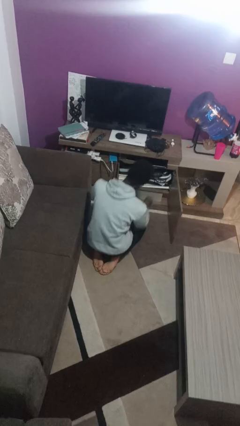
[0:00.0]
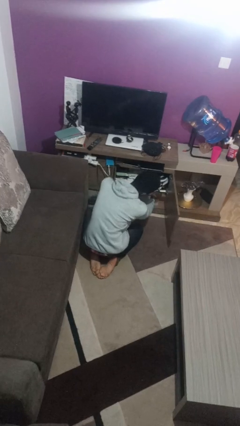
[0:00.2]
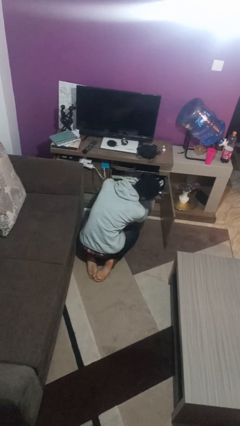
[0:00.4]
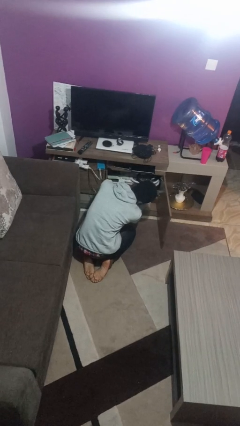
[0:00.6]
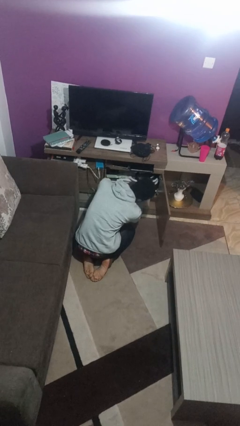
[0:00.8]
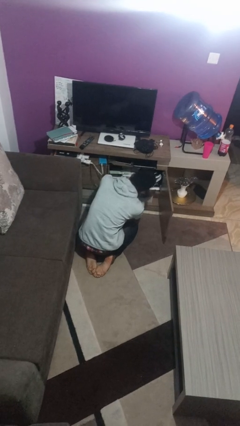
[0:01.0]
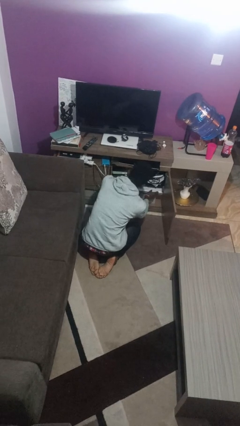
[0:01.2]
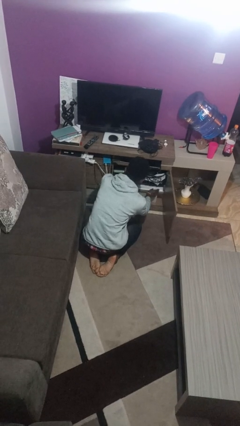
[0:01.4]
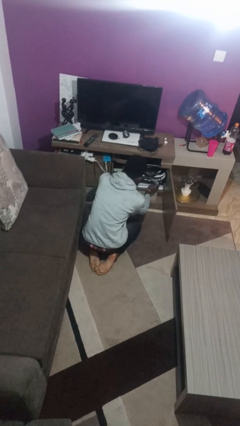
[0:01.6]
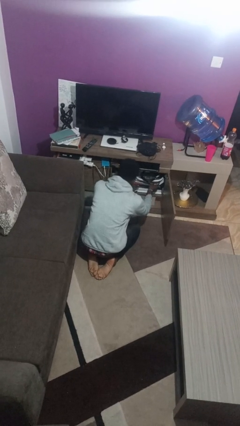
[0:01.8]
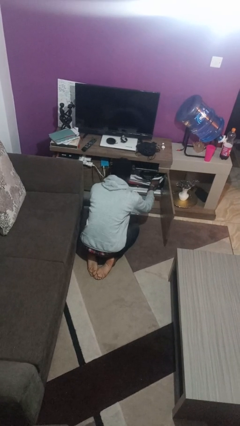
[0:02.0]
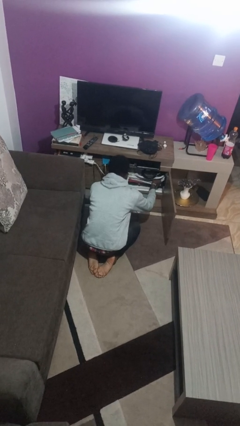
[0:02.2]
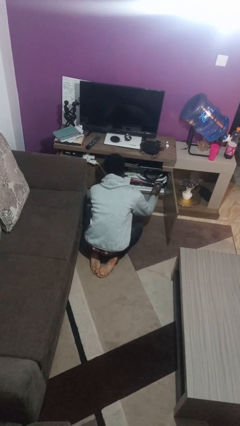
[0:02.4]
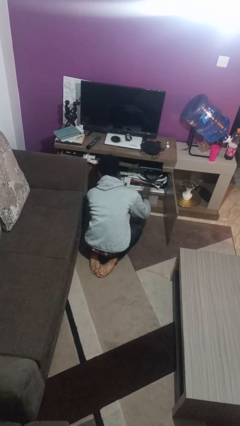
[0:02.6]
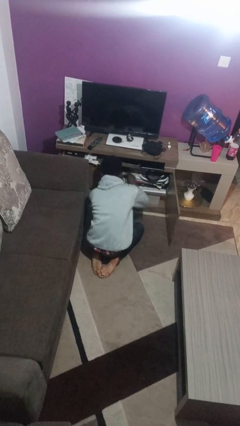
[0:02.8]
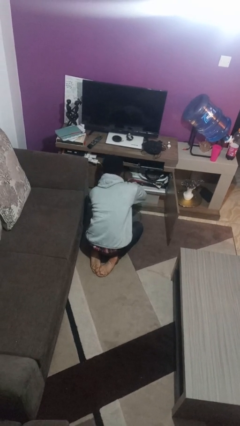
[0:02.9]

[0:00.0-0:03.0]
person searches in cabinet

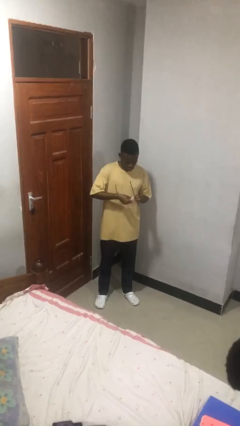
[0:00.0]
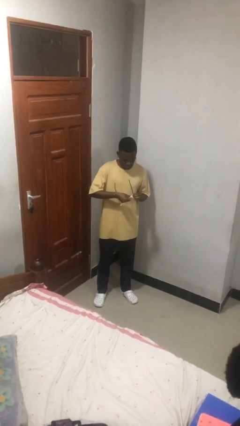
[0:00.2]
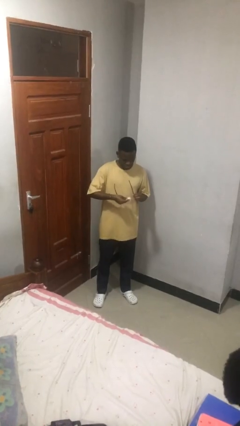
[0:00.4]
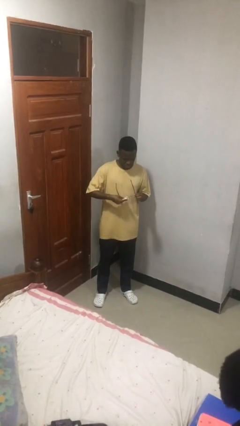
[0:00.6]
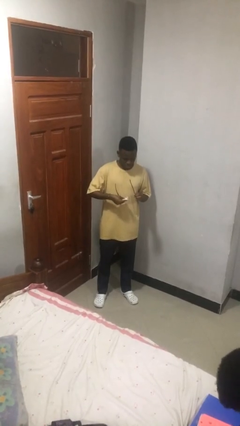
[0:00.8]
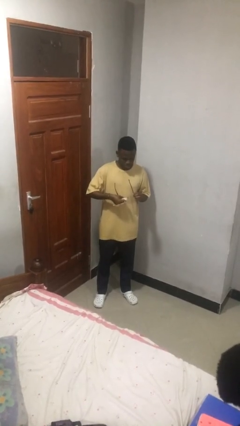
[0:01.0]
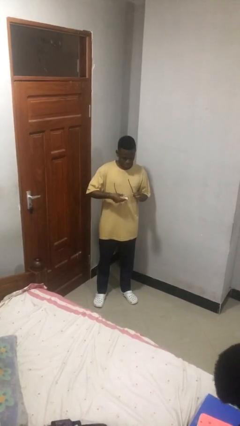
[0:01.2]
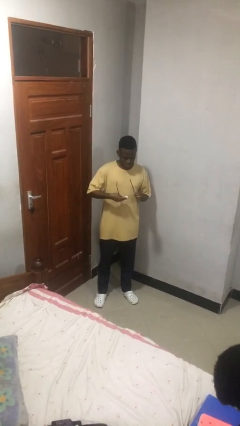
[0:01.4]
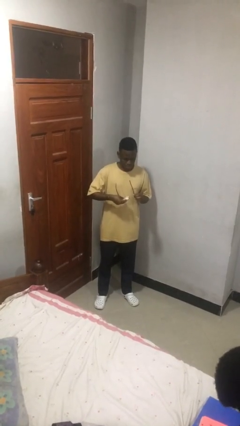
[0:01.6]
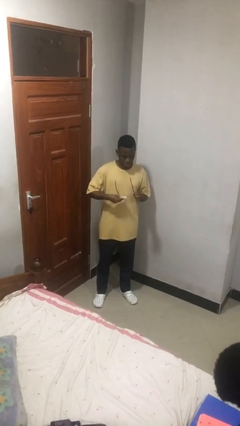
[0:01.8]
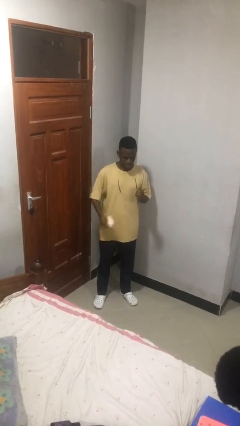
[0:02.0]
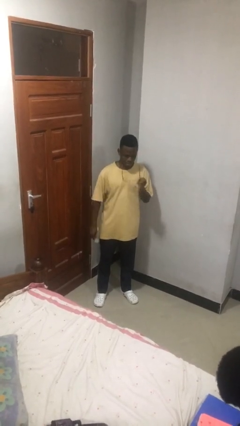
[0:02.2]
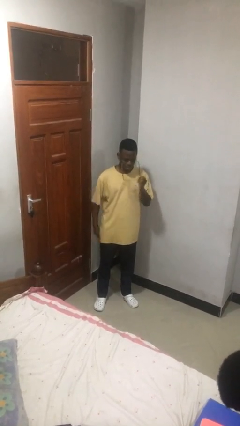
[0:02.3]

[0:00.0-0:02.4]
person cleans eyeglasses

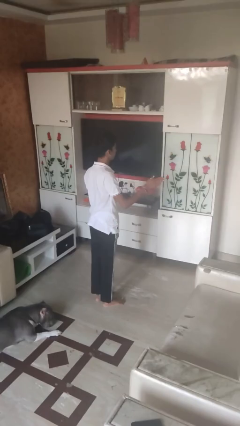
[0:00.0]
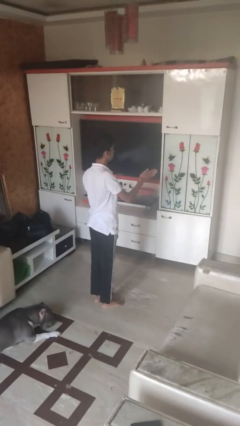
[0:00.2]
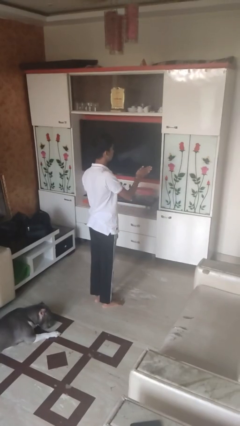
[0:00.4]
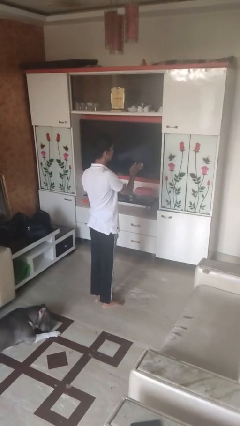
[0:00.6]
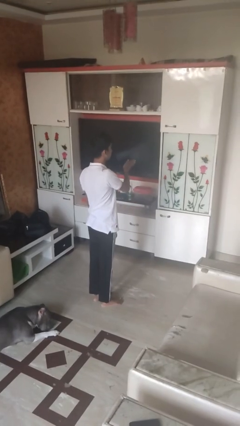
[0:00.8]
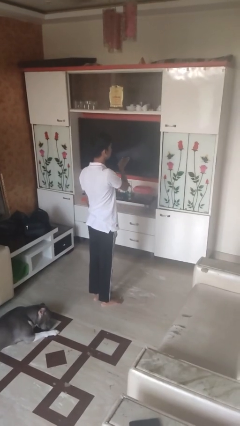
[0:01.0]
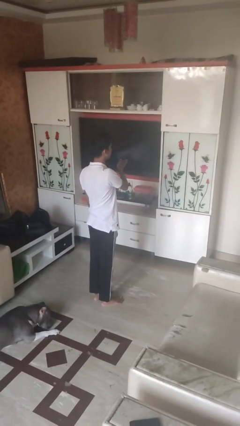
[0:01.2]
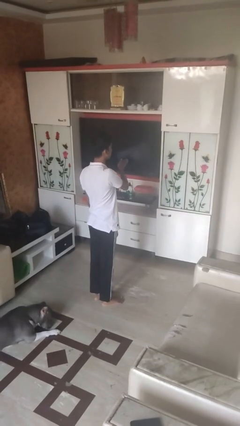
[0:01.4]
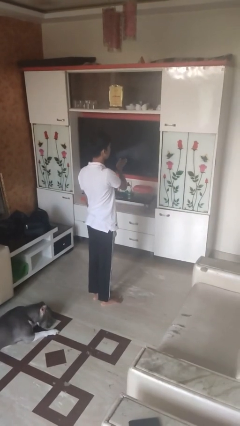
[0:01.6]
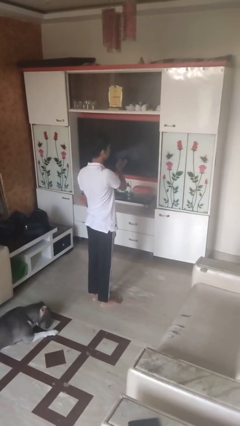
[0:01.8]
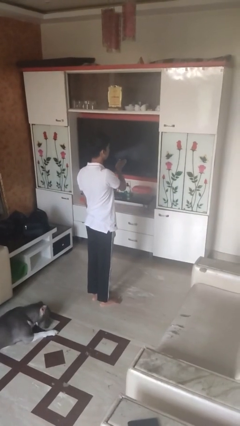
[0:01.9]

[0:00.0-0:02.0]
person gestures swipe left

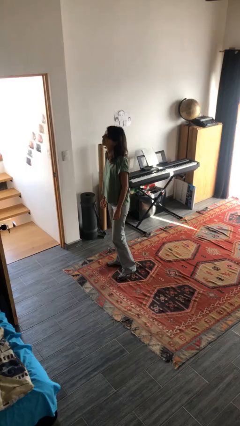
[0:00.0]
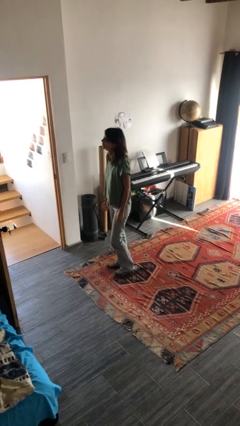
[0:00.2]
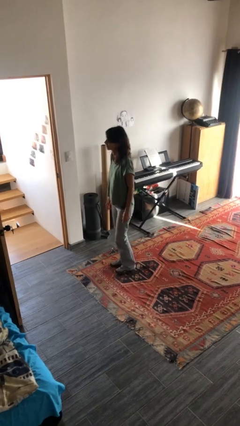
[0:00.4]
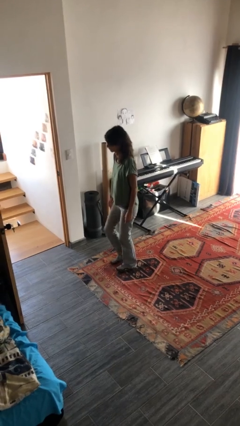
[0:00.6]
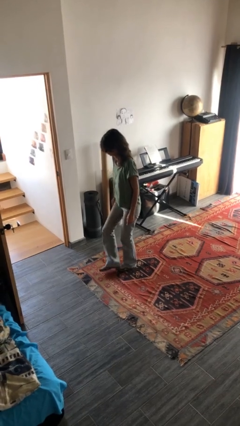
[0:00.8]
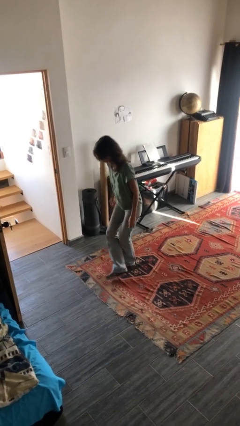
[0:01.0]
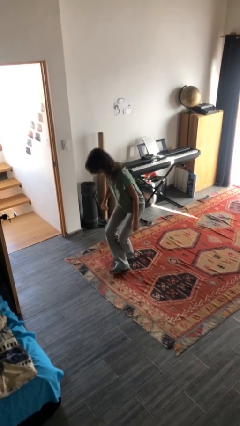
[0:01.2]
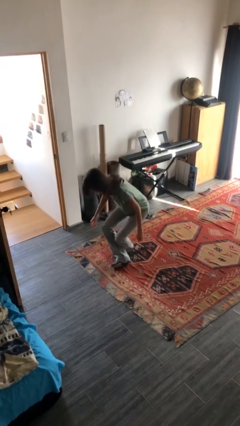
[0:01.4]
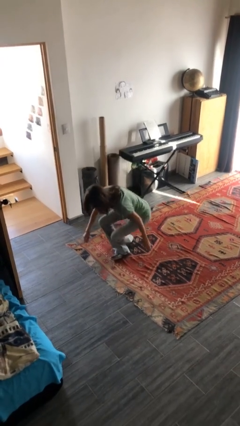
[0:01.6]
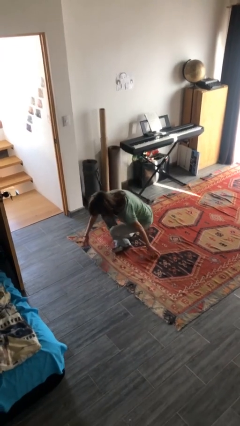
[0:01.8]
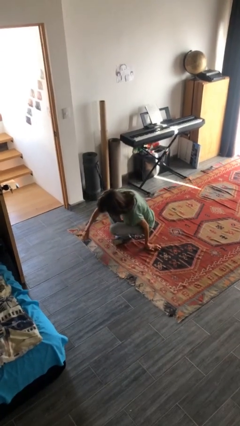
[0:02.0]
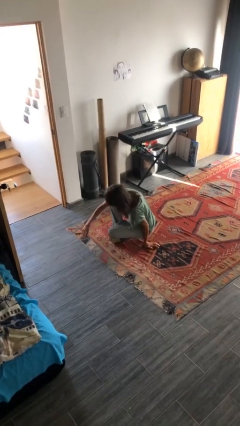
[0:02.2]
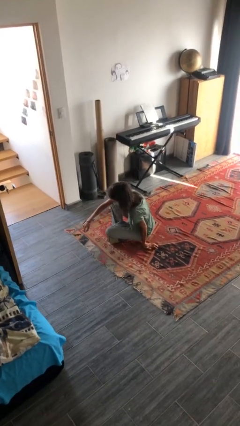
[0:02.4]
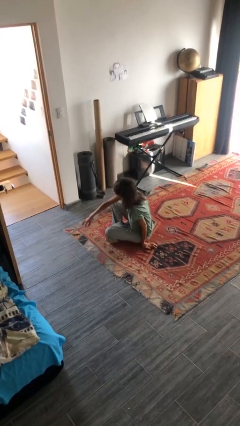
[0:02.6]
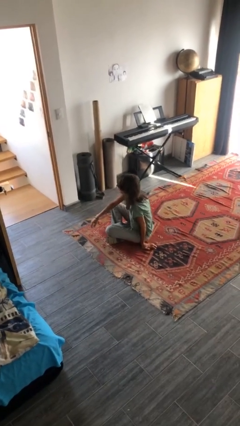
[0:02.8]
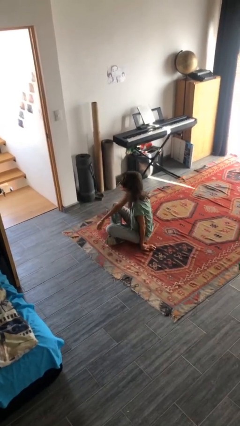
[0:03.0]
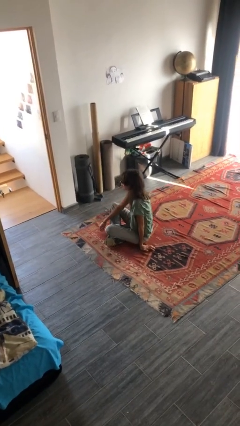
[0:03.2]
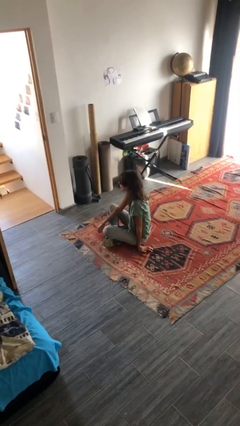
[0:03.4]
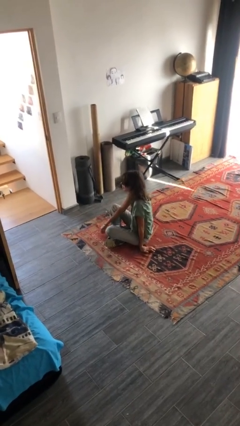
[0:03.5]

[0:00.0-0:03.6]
person sits crisscross

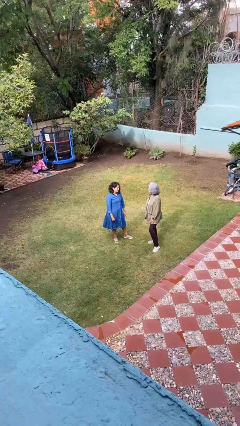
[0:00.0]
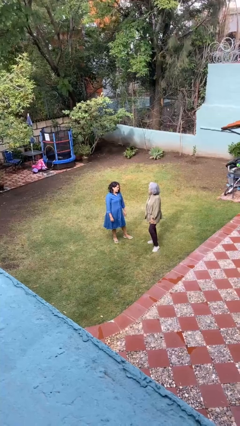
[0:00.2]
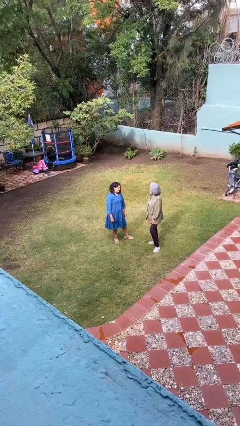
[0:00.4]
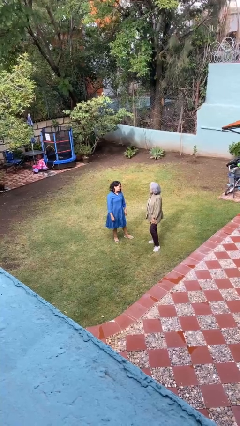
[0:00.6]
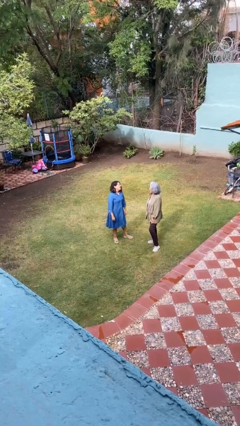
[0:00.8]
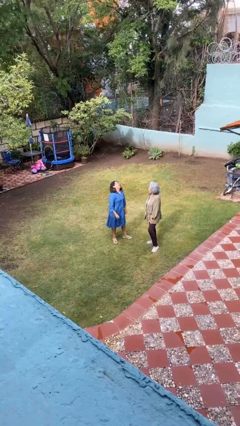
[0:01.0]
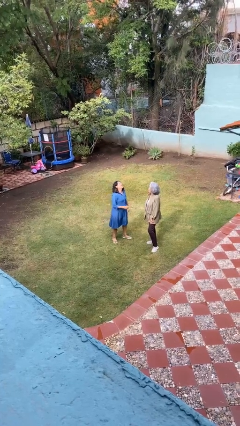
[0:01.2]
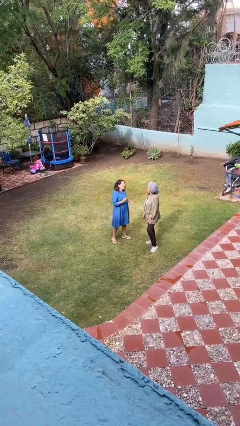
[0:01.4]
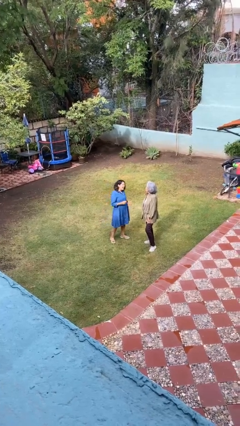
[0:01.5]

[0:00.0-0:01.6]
person laughs with person

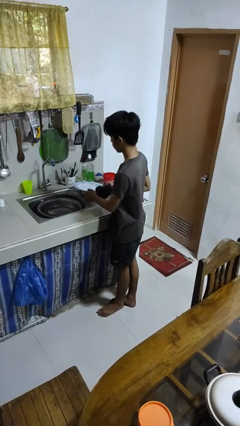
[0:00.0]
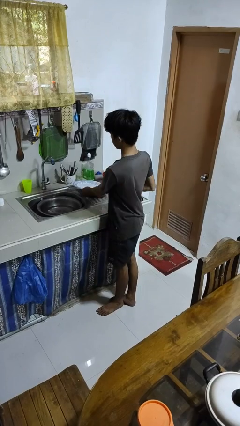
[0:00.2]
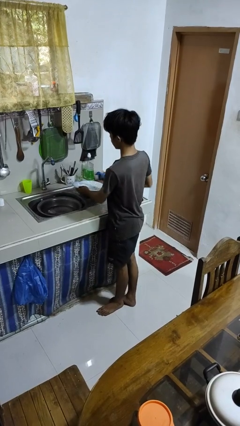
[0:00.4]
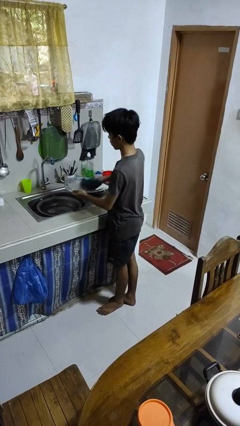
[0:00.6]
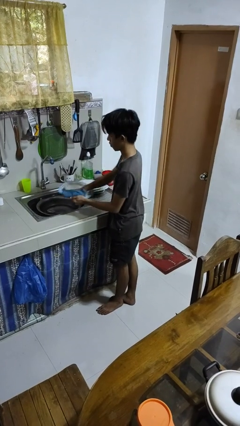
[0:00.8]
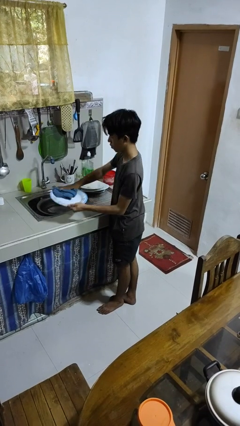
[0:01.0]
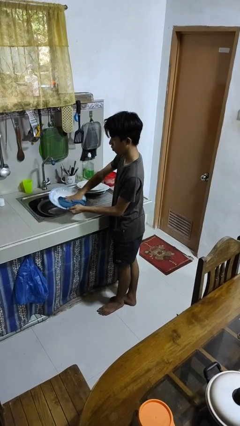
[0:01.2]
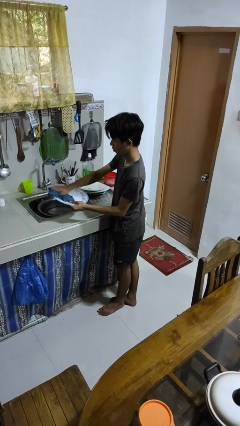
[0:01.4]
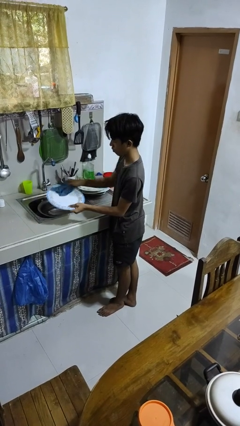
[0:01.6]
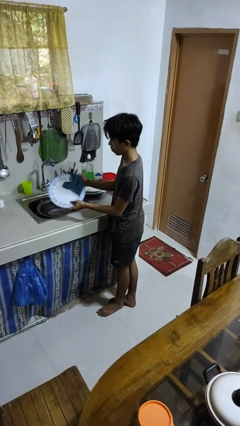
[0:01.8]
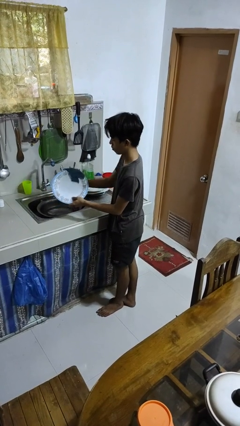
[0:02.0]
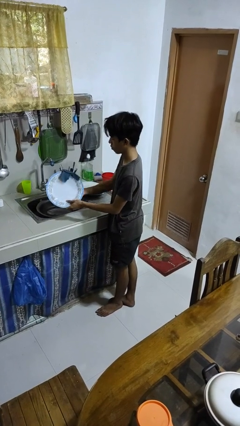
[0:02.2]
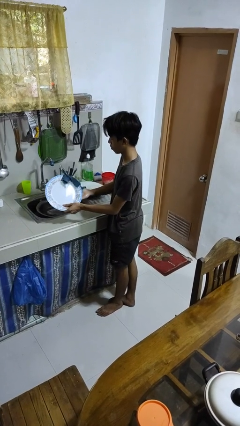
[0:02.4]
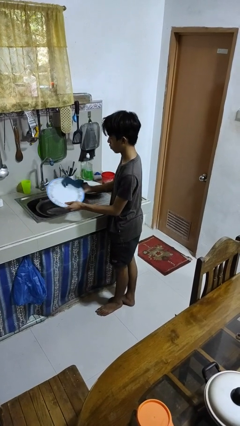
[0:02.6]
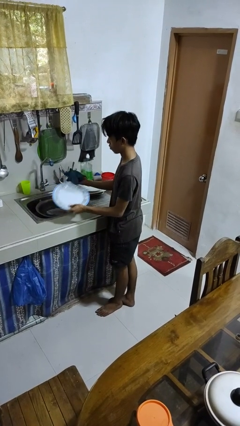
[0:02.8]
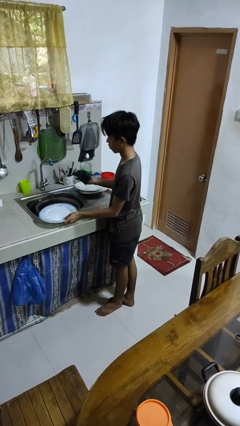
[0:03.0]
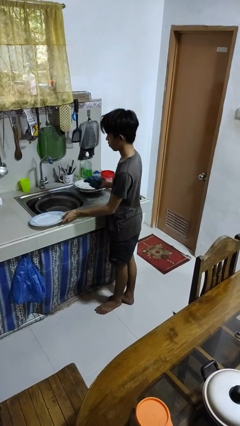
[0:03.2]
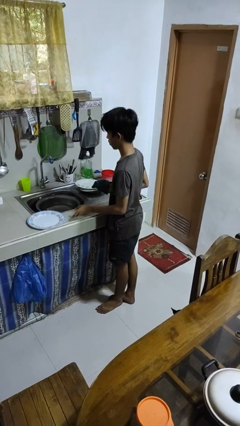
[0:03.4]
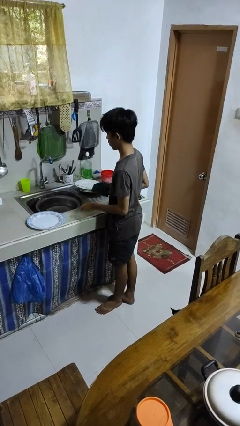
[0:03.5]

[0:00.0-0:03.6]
person dries dish

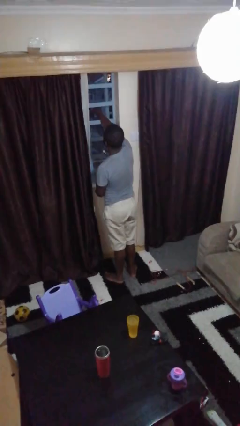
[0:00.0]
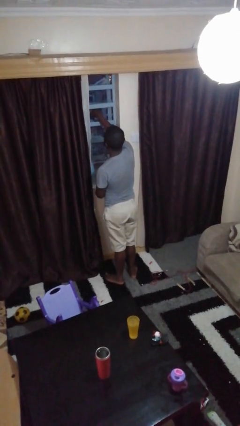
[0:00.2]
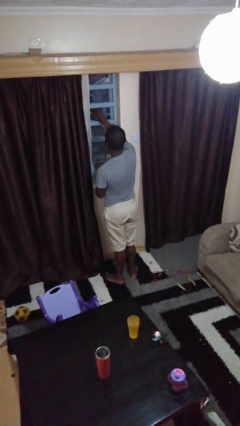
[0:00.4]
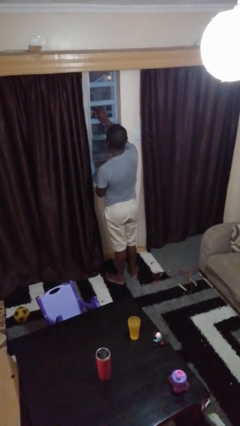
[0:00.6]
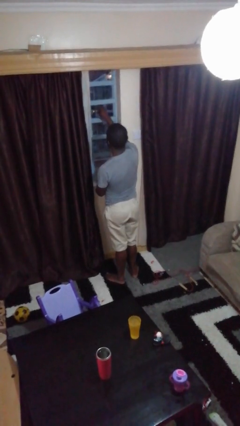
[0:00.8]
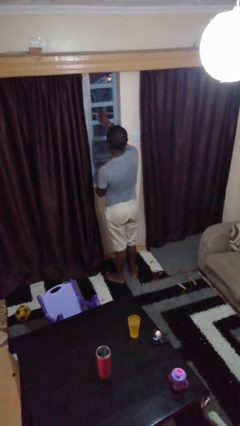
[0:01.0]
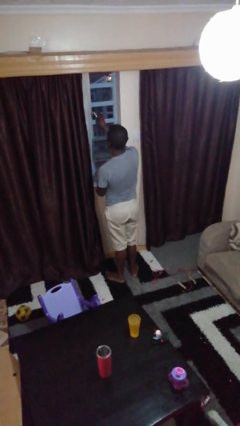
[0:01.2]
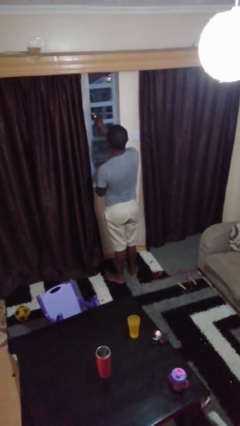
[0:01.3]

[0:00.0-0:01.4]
person closes home window
